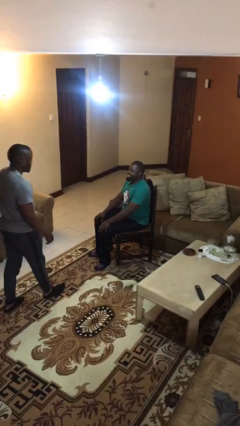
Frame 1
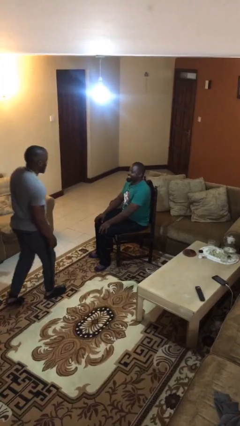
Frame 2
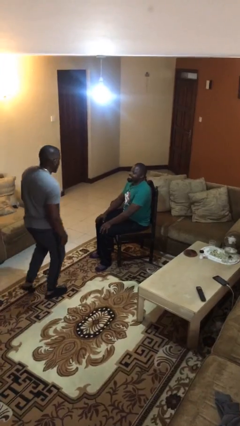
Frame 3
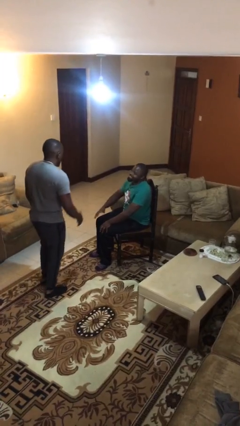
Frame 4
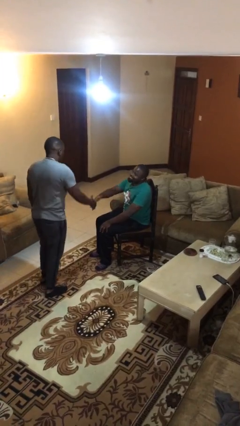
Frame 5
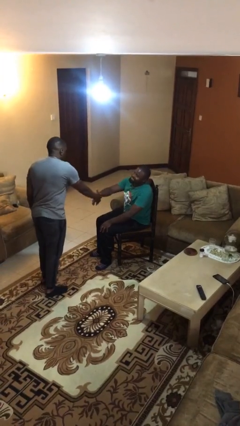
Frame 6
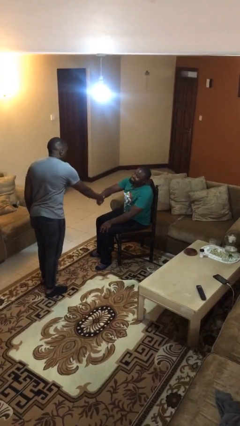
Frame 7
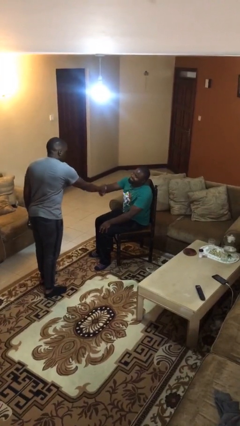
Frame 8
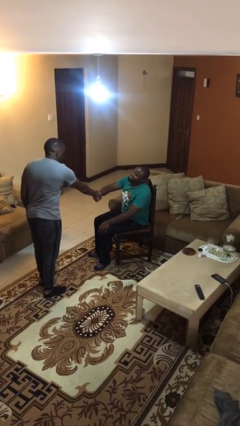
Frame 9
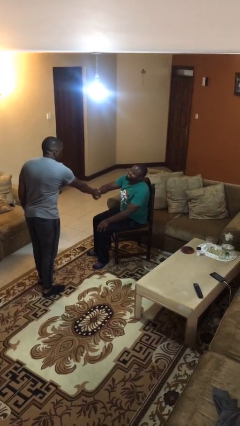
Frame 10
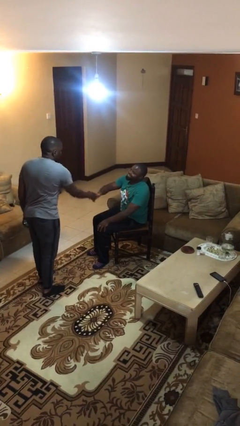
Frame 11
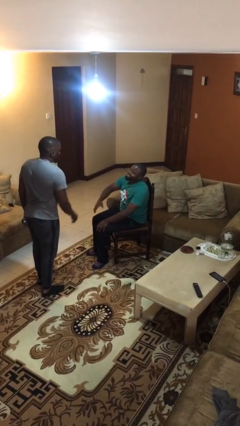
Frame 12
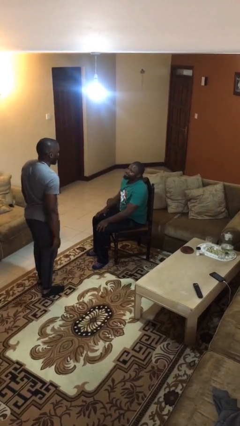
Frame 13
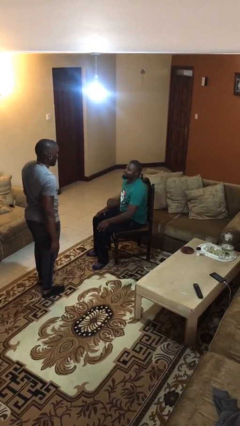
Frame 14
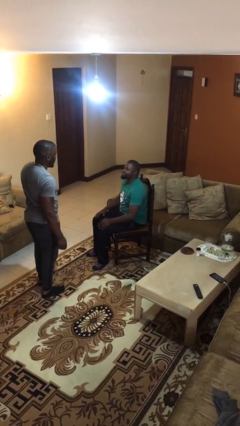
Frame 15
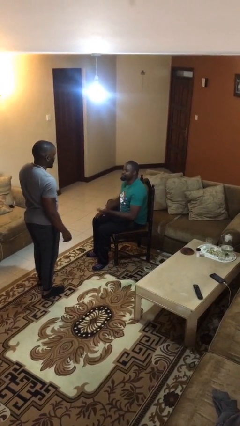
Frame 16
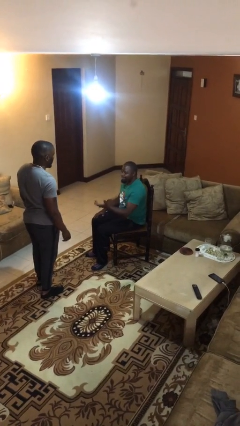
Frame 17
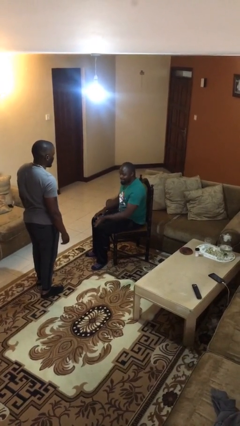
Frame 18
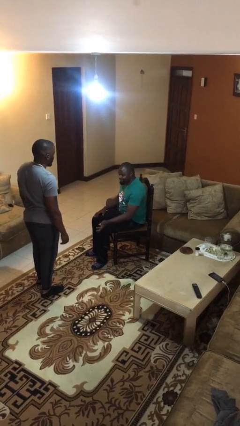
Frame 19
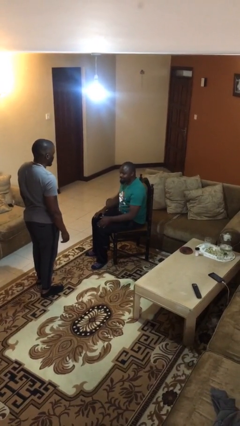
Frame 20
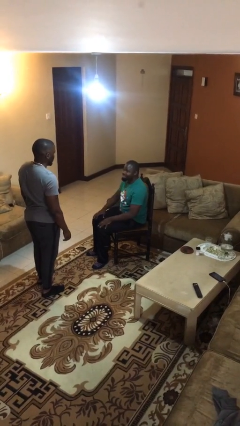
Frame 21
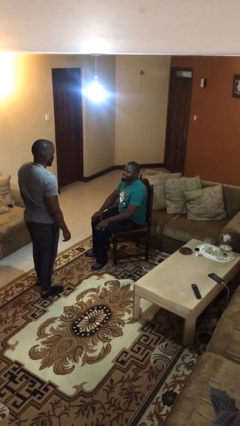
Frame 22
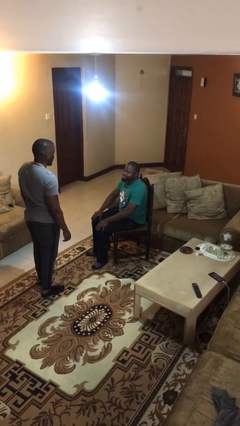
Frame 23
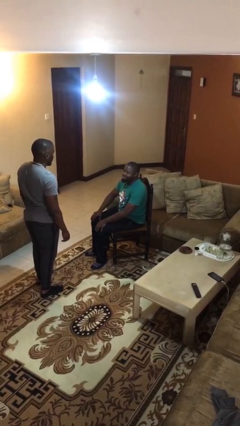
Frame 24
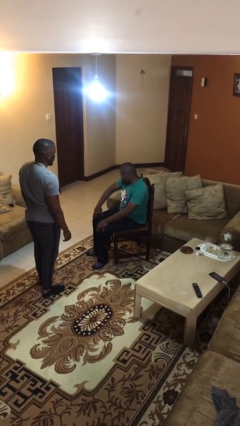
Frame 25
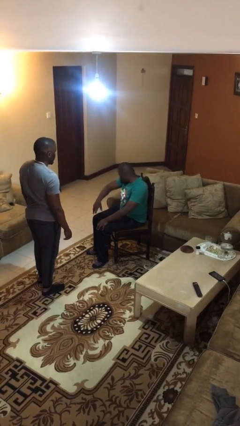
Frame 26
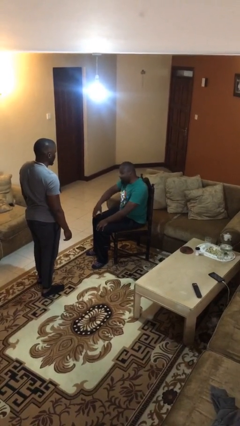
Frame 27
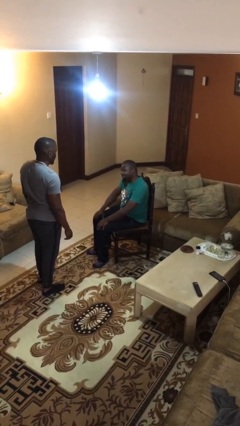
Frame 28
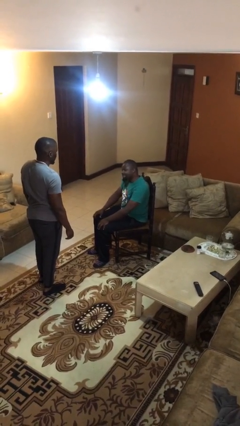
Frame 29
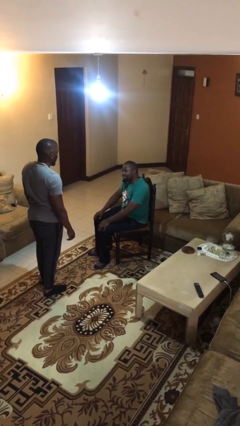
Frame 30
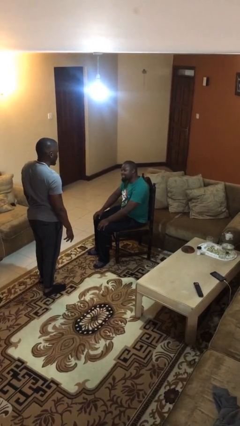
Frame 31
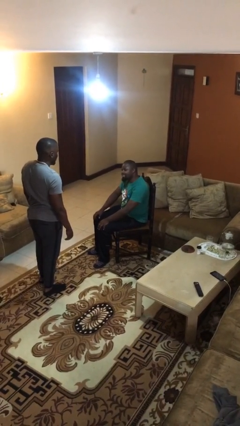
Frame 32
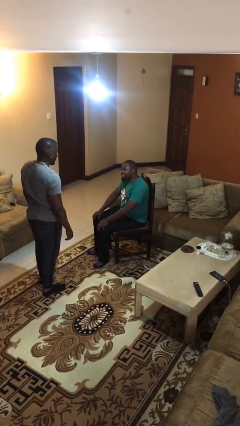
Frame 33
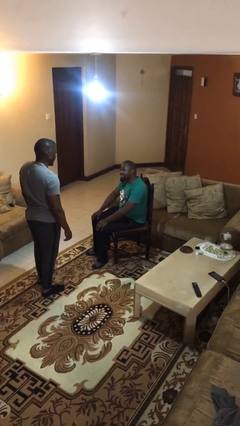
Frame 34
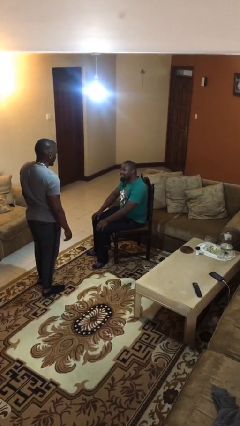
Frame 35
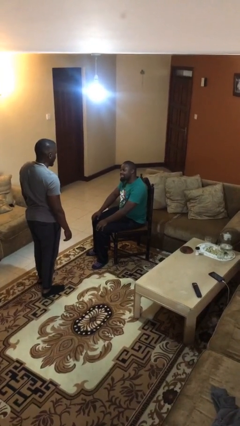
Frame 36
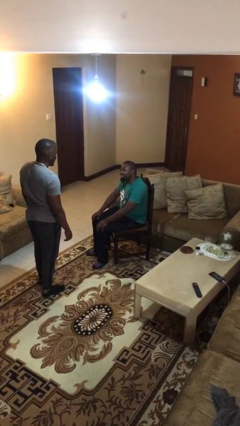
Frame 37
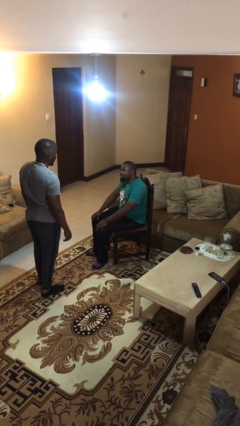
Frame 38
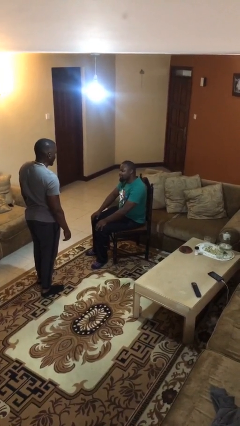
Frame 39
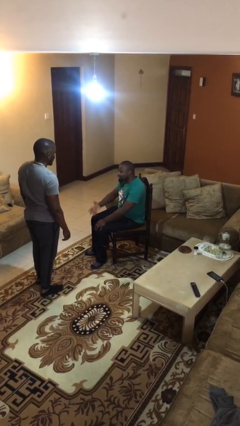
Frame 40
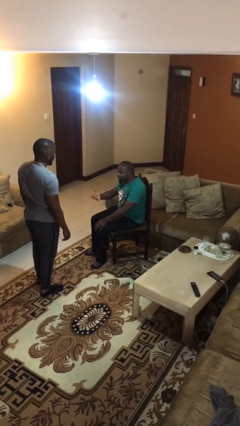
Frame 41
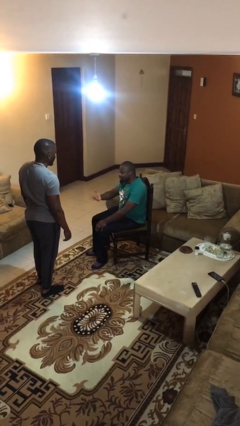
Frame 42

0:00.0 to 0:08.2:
person shakes hand

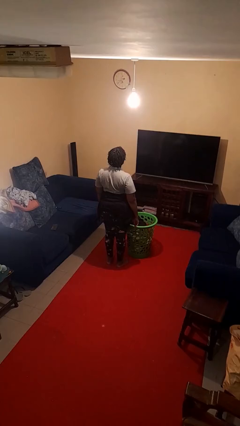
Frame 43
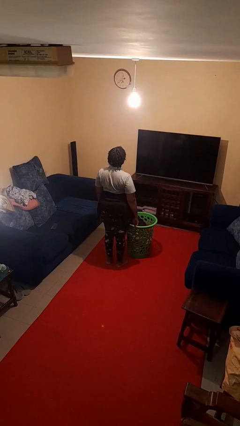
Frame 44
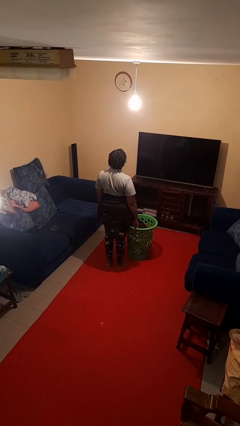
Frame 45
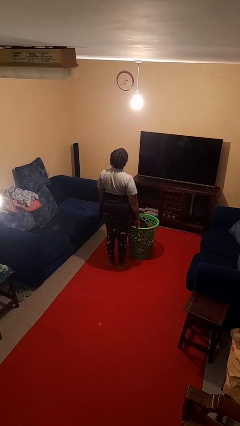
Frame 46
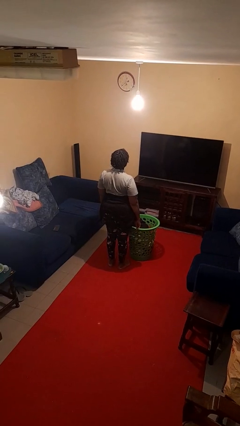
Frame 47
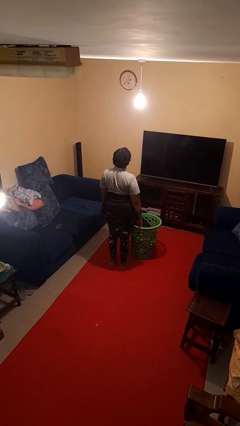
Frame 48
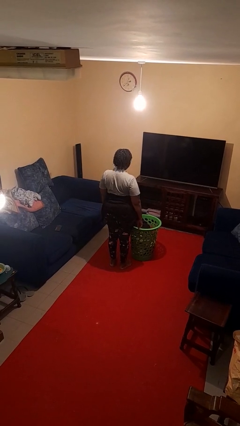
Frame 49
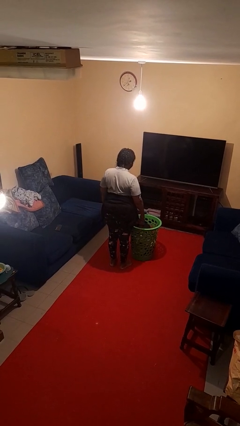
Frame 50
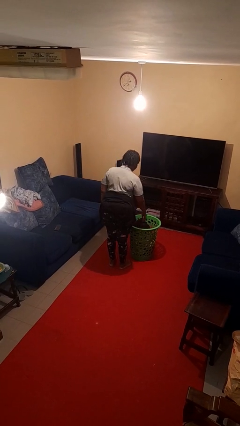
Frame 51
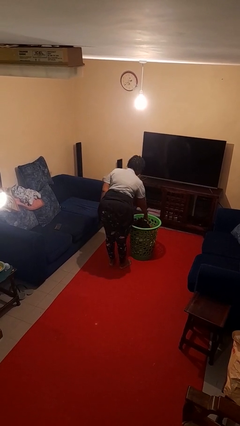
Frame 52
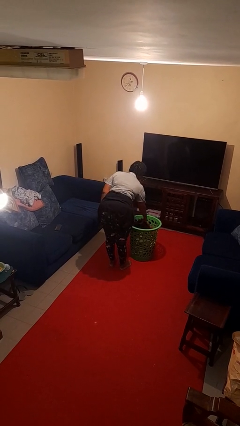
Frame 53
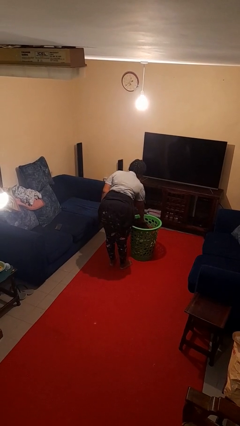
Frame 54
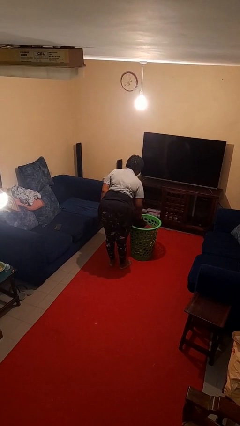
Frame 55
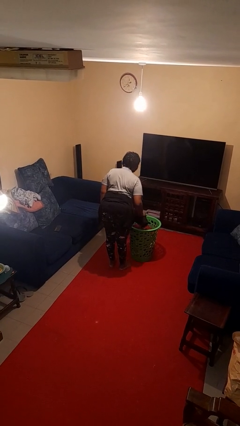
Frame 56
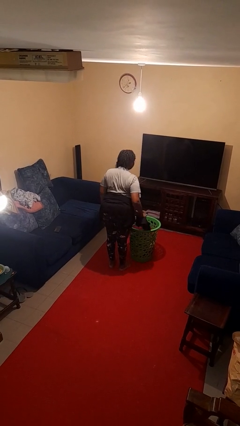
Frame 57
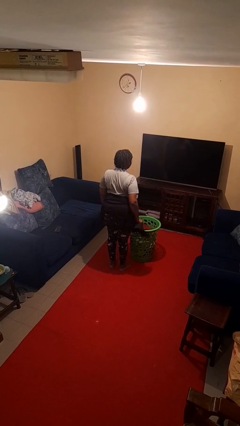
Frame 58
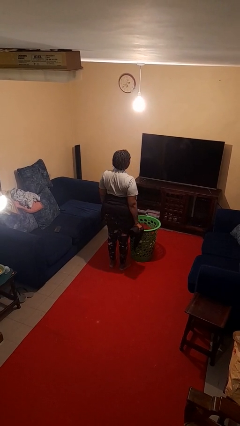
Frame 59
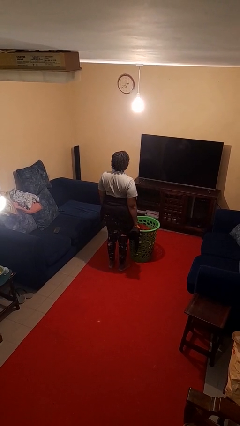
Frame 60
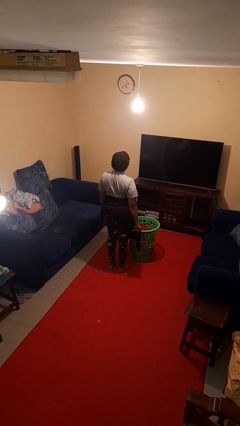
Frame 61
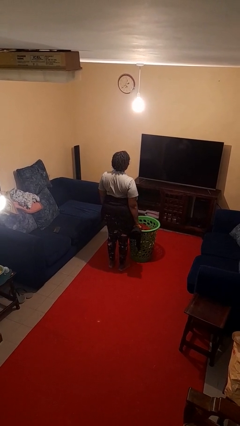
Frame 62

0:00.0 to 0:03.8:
person takes object from basket

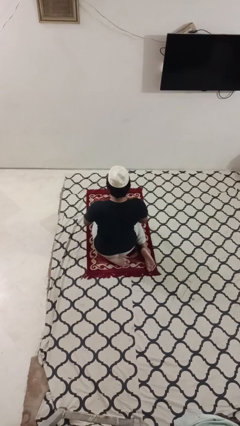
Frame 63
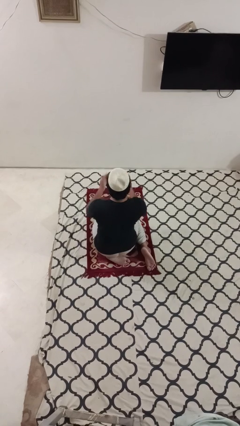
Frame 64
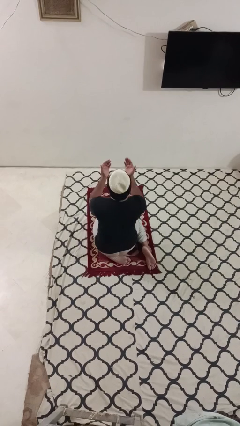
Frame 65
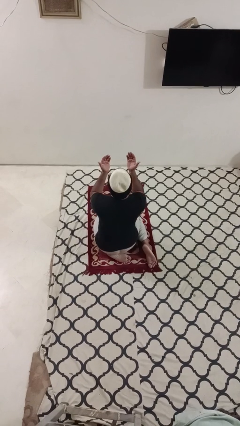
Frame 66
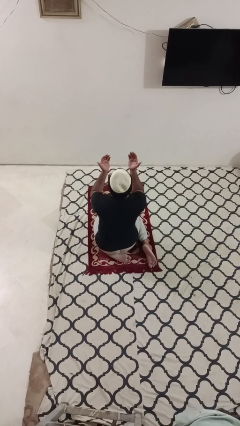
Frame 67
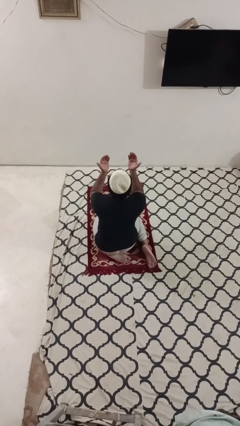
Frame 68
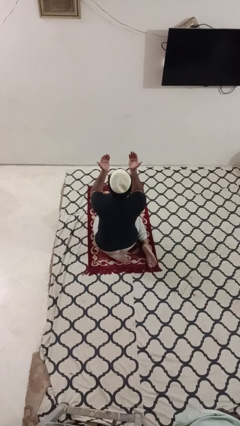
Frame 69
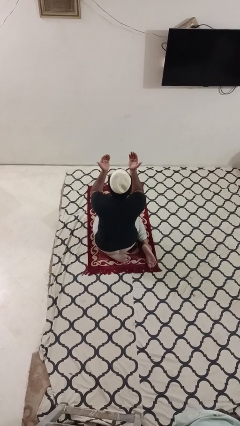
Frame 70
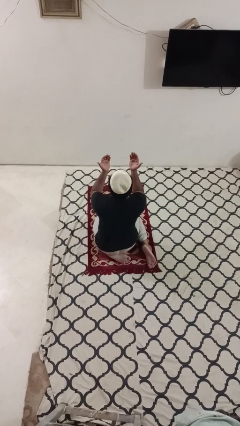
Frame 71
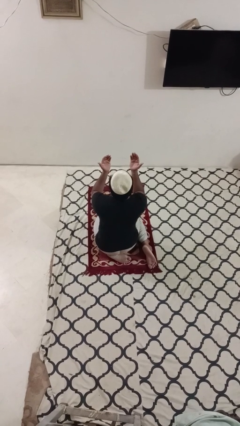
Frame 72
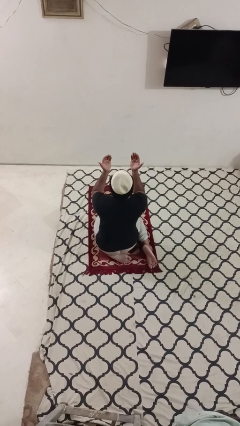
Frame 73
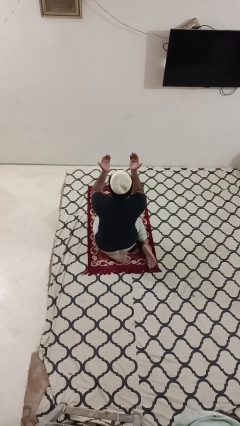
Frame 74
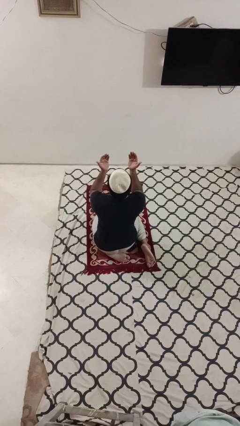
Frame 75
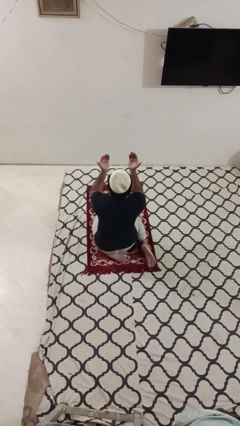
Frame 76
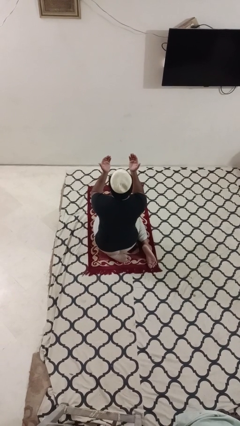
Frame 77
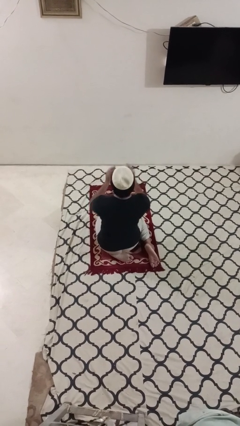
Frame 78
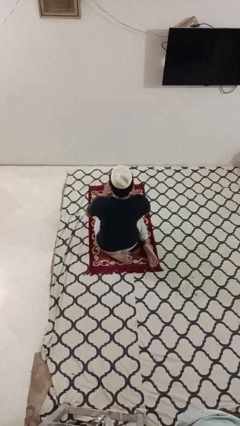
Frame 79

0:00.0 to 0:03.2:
person prays

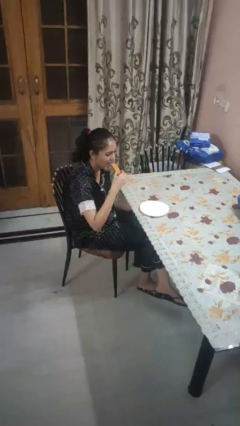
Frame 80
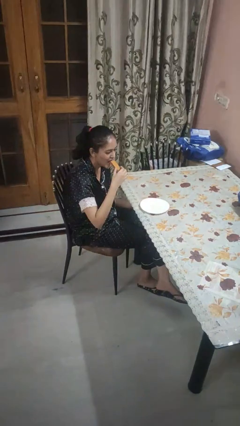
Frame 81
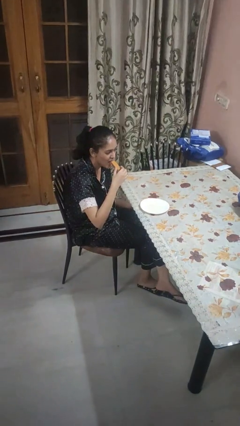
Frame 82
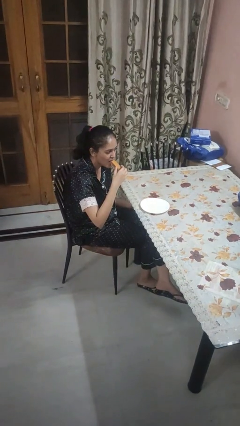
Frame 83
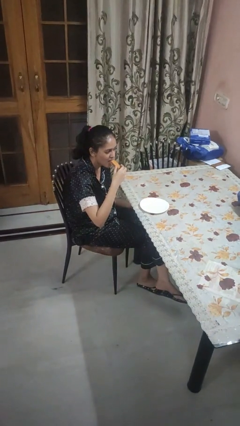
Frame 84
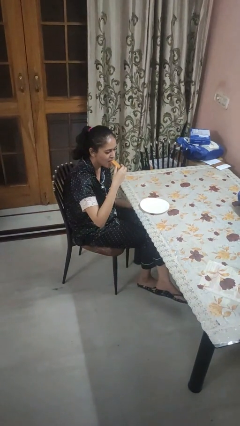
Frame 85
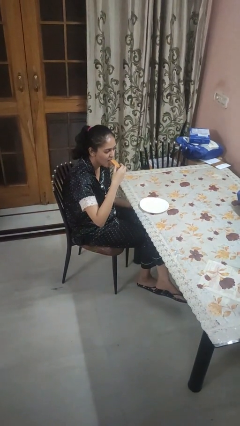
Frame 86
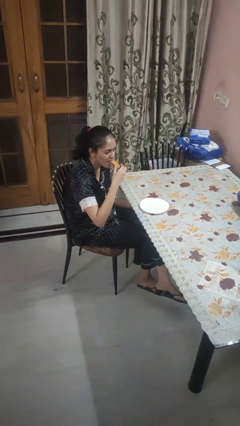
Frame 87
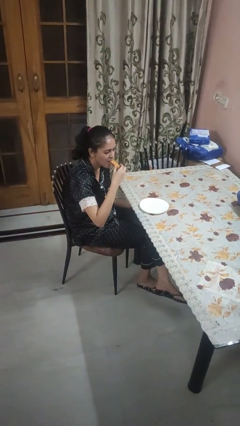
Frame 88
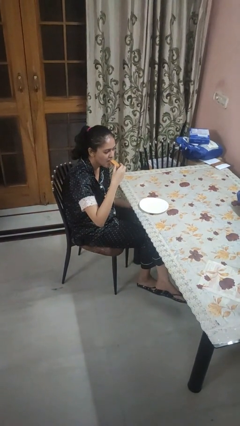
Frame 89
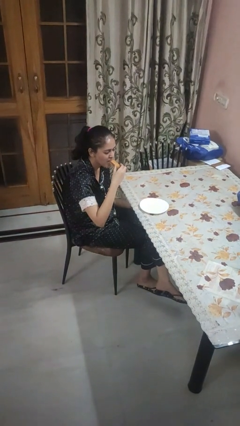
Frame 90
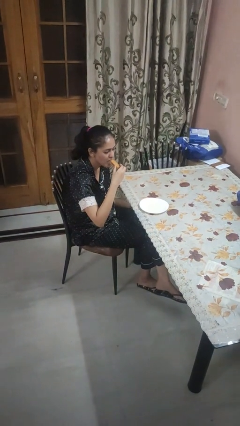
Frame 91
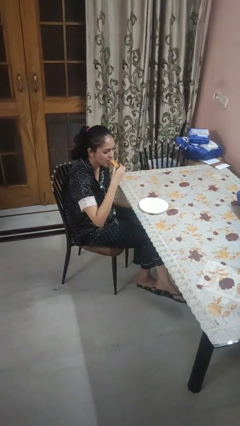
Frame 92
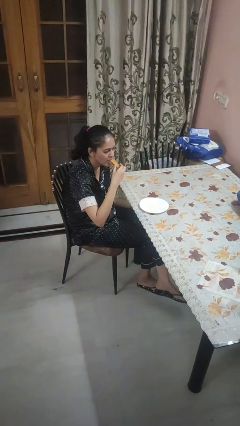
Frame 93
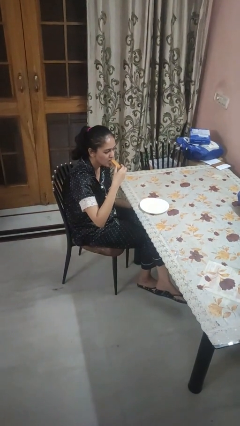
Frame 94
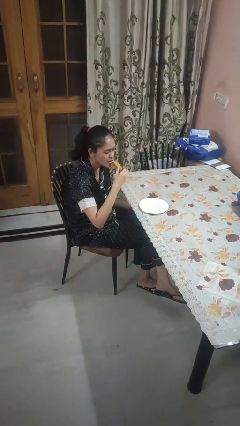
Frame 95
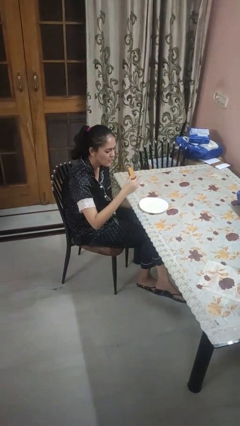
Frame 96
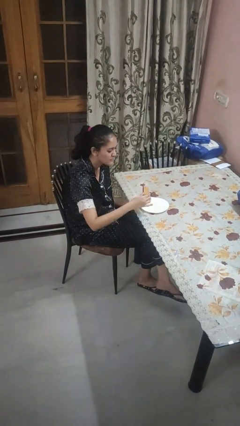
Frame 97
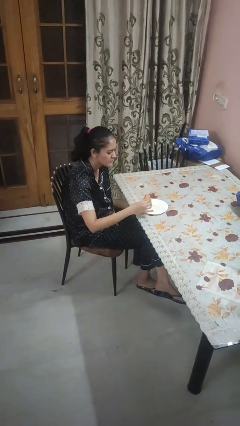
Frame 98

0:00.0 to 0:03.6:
person eats with hands
